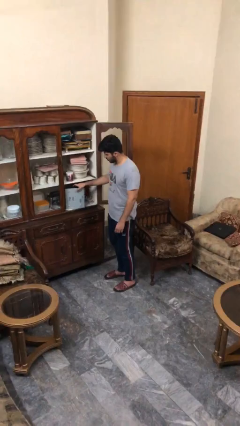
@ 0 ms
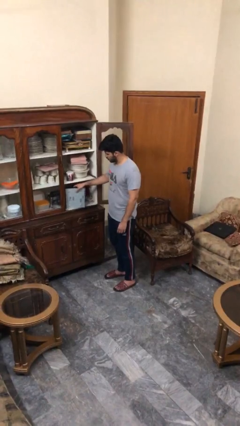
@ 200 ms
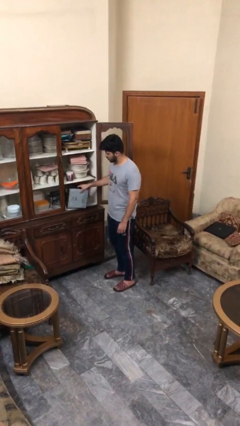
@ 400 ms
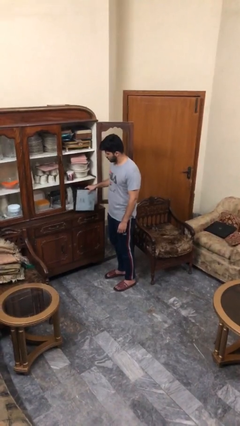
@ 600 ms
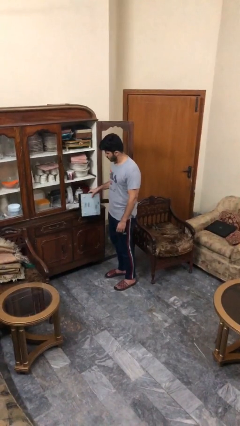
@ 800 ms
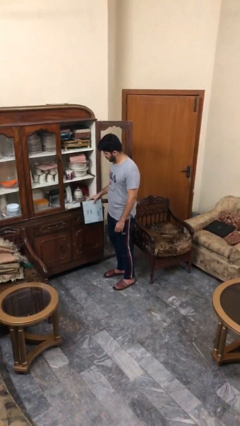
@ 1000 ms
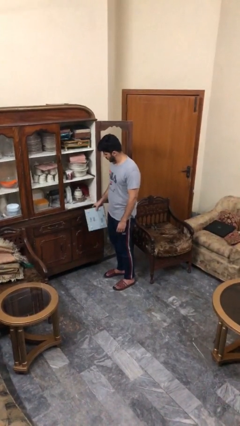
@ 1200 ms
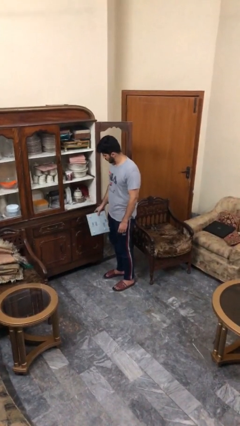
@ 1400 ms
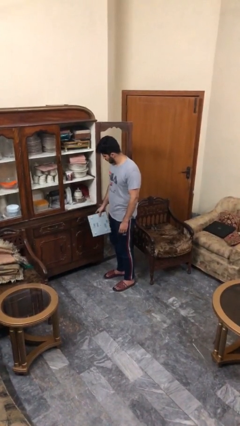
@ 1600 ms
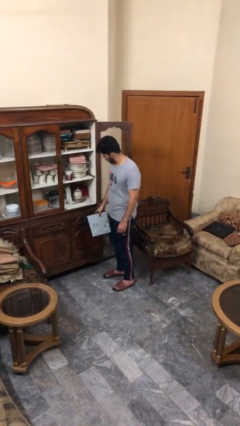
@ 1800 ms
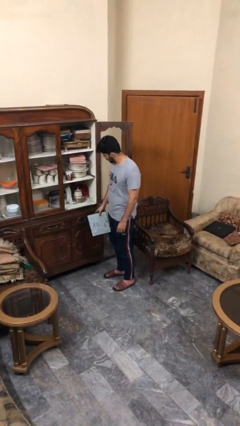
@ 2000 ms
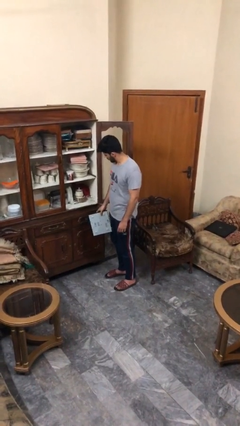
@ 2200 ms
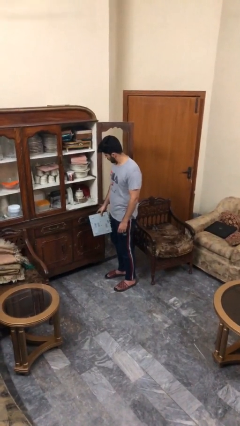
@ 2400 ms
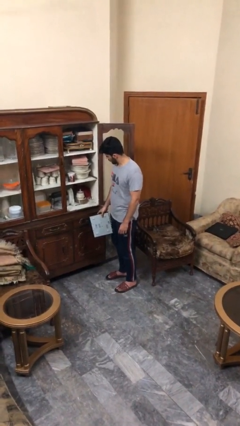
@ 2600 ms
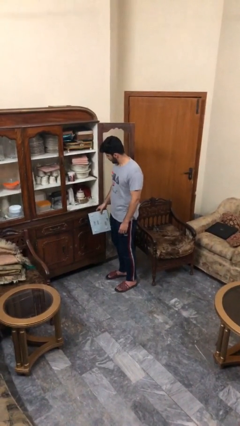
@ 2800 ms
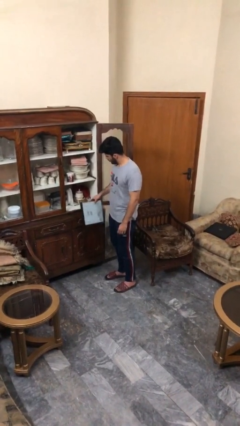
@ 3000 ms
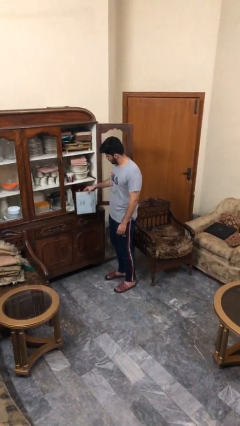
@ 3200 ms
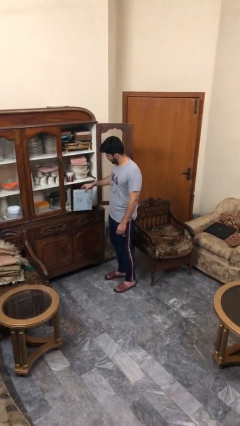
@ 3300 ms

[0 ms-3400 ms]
person picks up object from cabinet

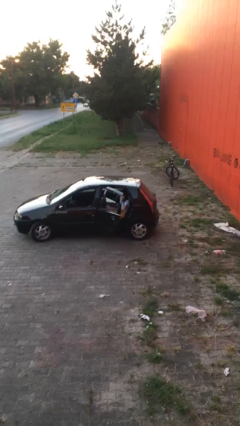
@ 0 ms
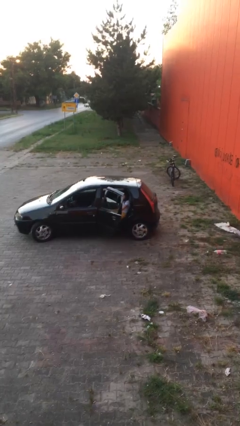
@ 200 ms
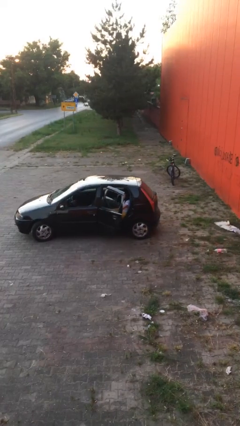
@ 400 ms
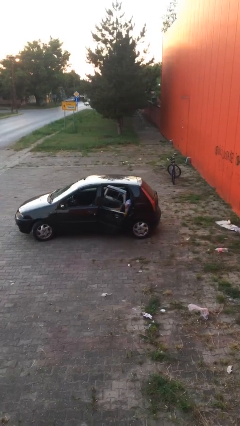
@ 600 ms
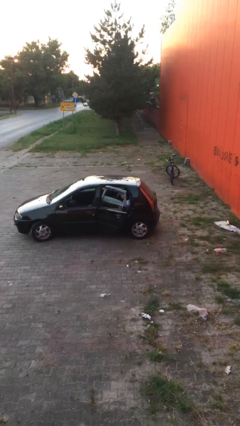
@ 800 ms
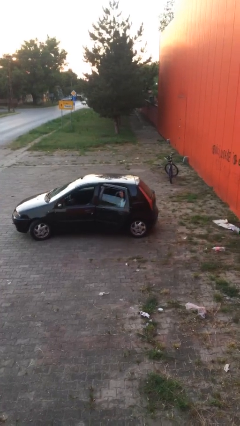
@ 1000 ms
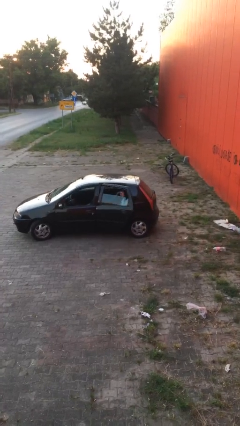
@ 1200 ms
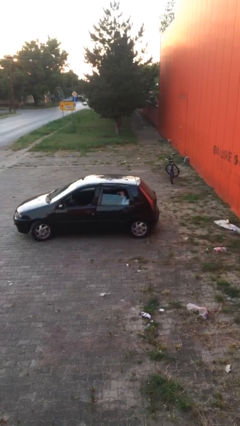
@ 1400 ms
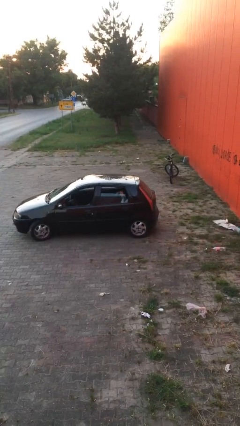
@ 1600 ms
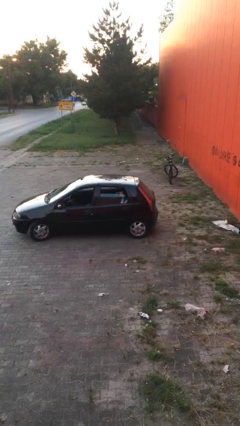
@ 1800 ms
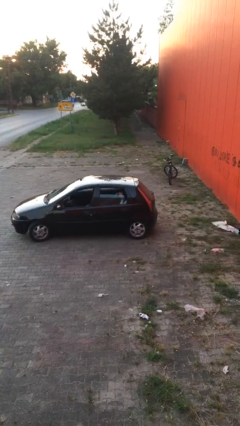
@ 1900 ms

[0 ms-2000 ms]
person closes car door

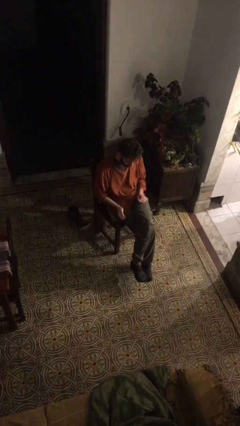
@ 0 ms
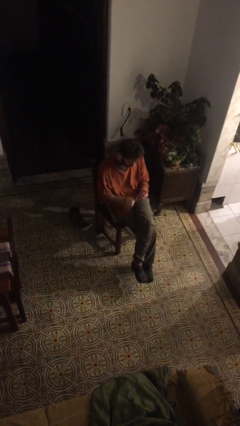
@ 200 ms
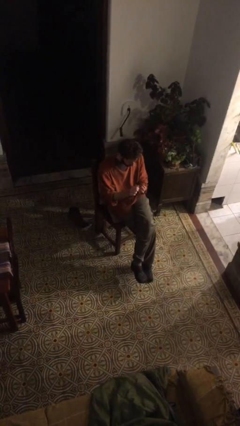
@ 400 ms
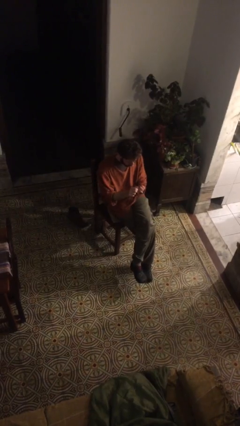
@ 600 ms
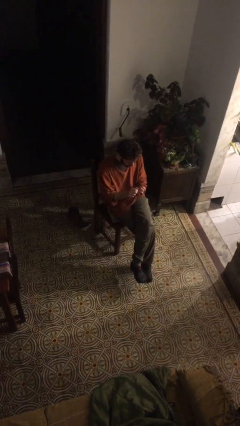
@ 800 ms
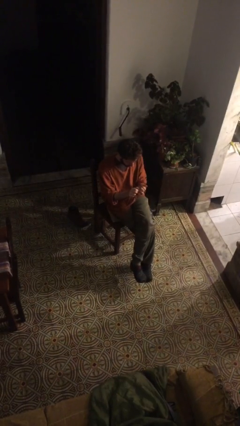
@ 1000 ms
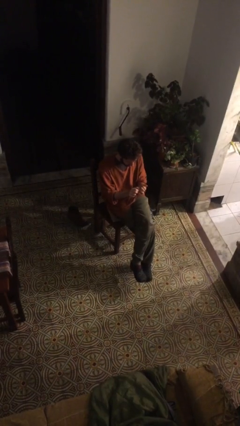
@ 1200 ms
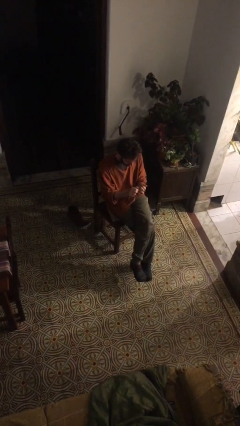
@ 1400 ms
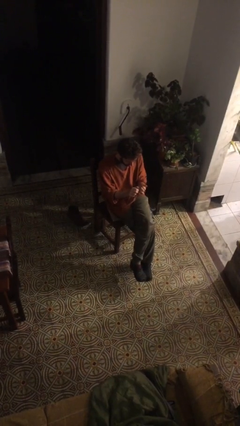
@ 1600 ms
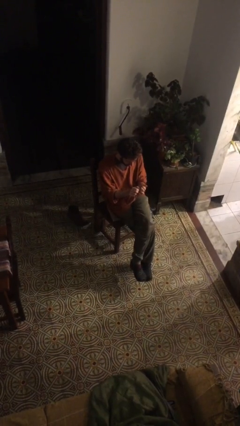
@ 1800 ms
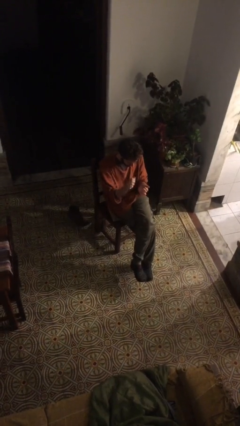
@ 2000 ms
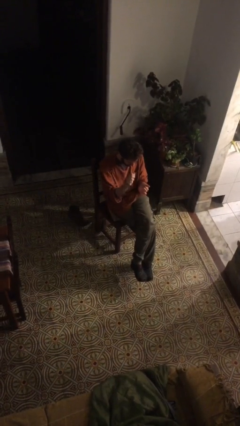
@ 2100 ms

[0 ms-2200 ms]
person files fingernails

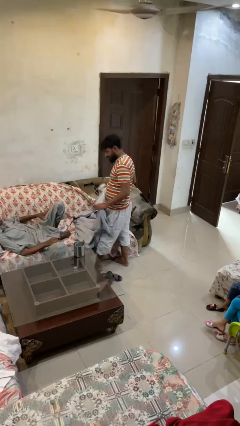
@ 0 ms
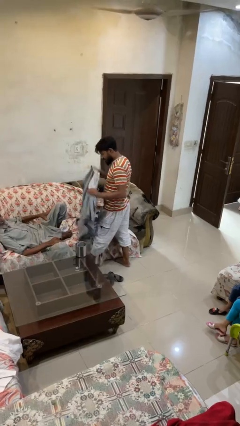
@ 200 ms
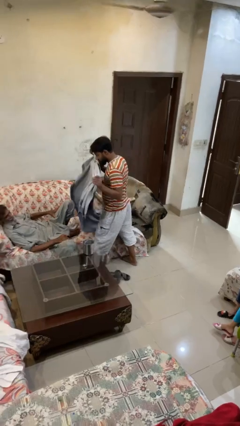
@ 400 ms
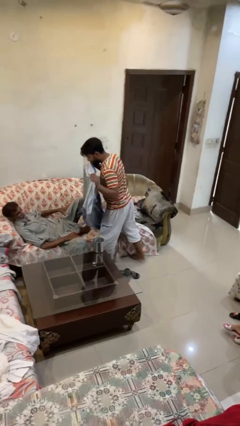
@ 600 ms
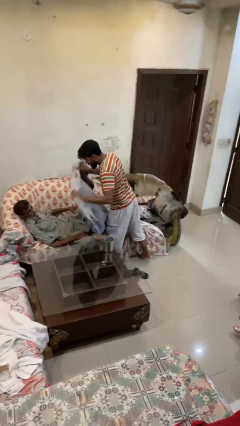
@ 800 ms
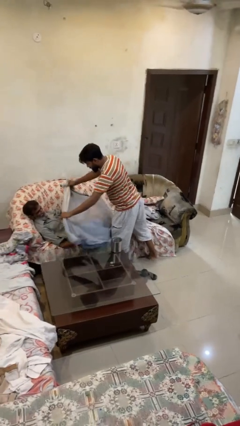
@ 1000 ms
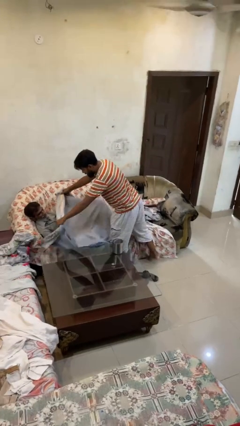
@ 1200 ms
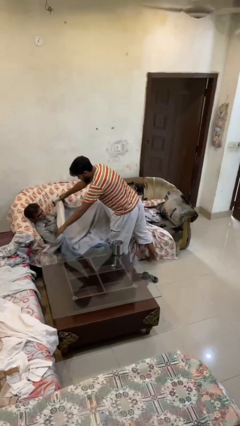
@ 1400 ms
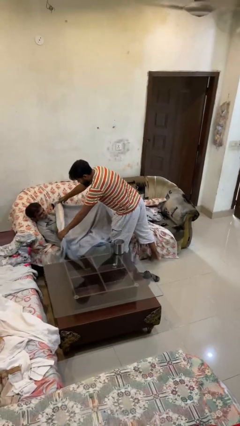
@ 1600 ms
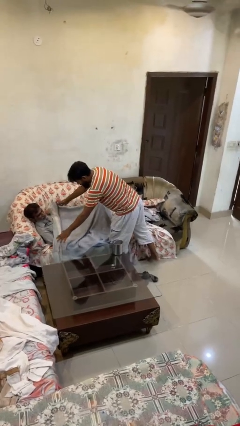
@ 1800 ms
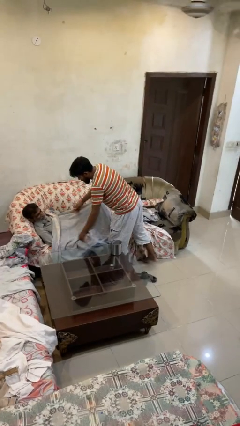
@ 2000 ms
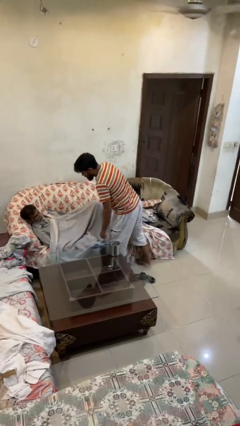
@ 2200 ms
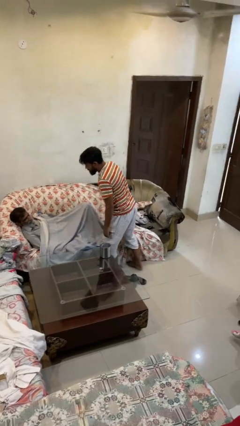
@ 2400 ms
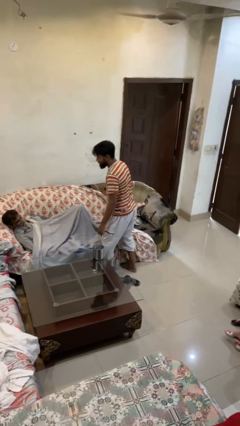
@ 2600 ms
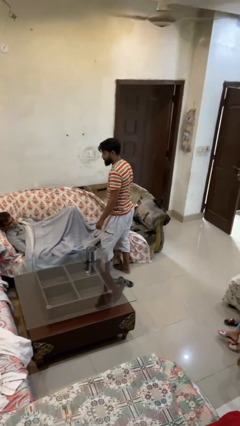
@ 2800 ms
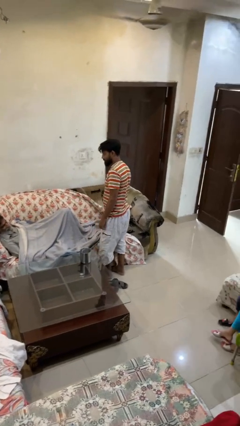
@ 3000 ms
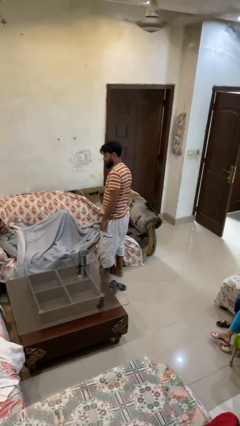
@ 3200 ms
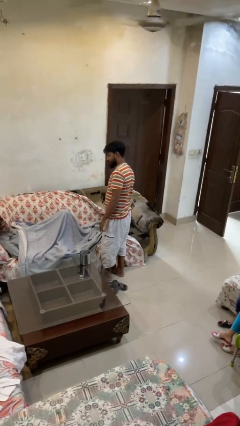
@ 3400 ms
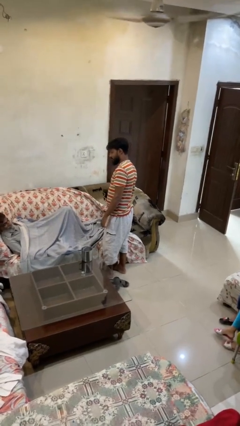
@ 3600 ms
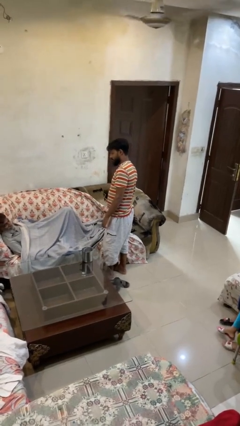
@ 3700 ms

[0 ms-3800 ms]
person covers friend with blanket

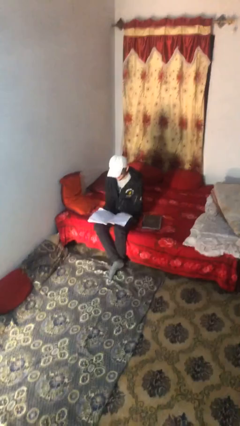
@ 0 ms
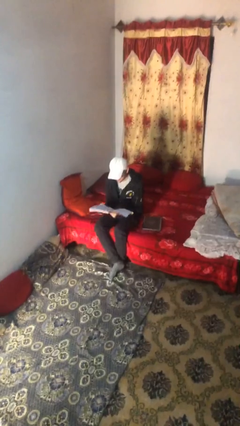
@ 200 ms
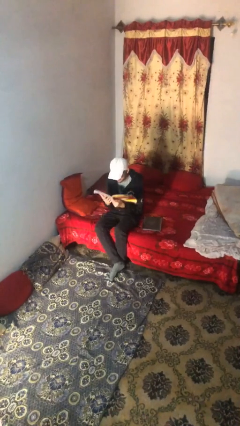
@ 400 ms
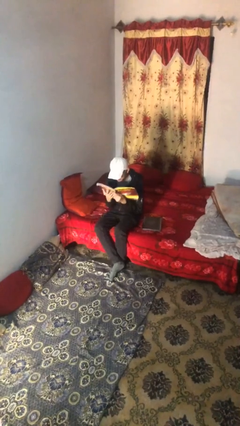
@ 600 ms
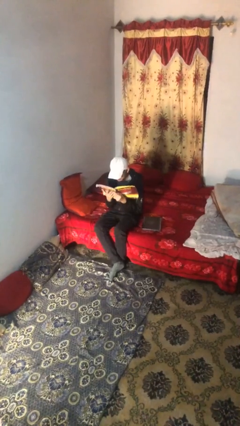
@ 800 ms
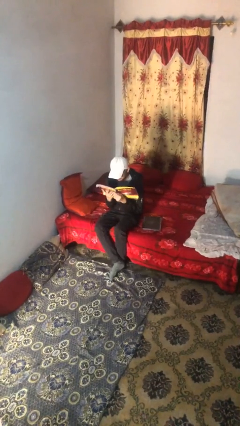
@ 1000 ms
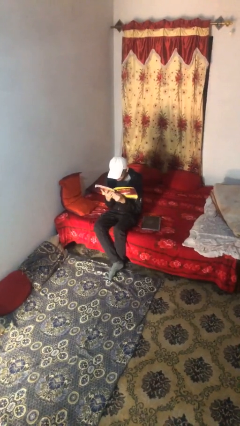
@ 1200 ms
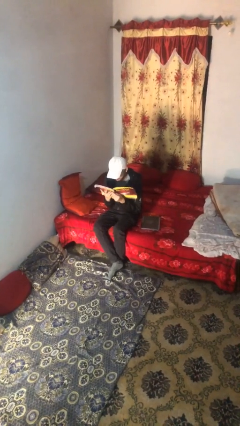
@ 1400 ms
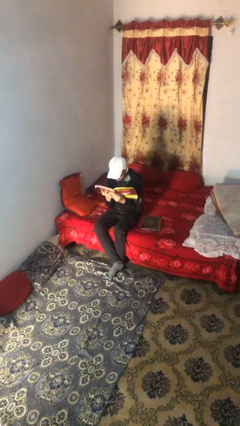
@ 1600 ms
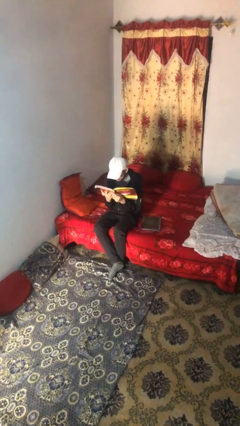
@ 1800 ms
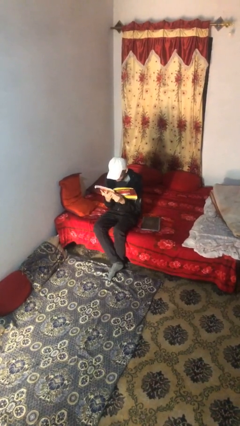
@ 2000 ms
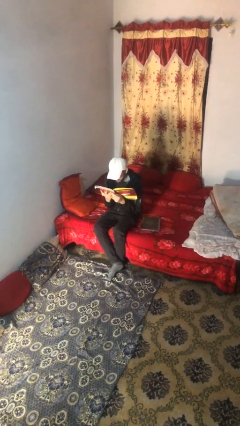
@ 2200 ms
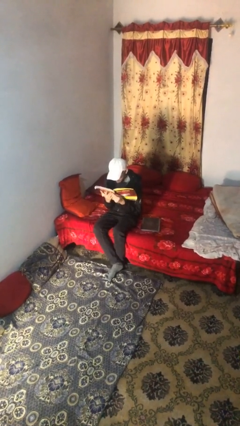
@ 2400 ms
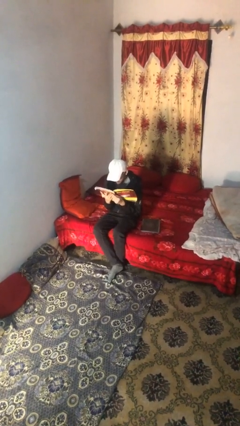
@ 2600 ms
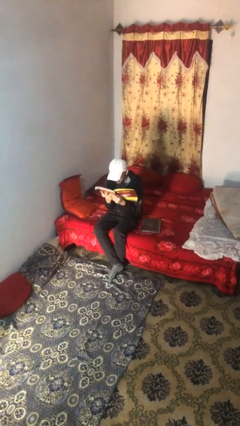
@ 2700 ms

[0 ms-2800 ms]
person reads document

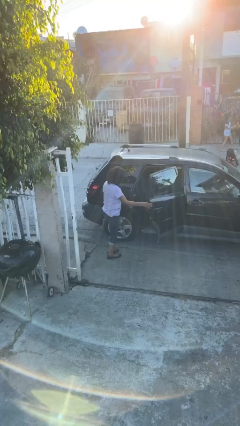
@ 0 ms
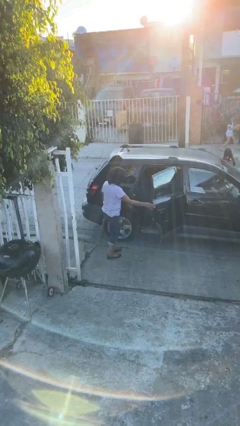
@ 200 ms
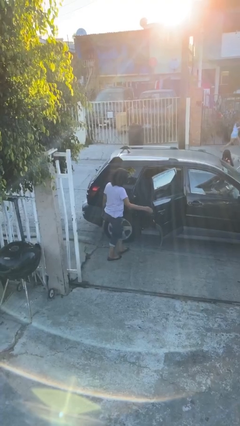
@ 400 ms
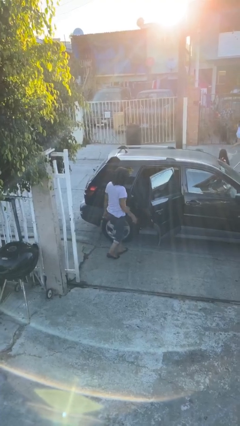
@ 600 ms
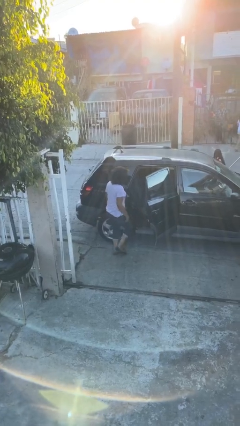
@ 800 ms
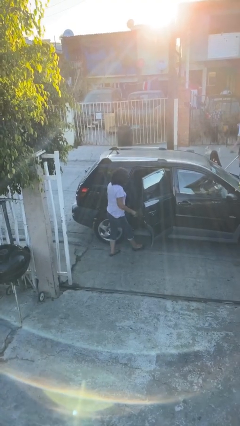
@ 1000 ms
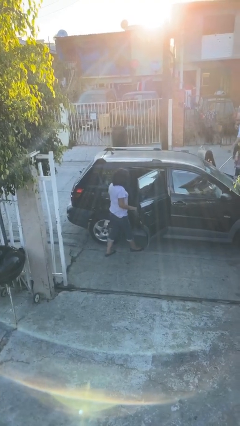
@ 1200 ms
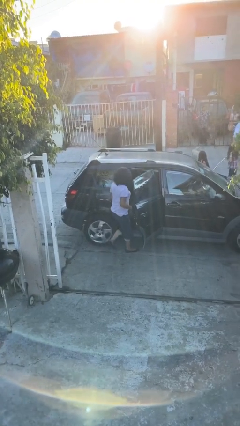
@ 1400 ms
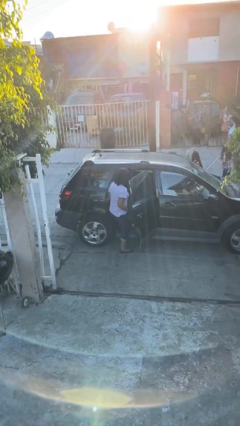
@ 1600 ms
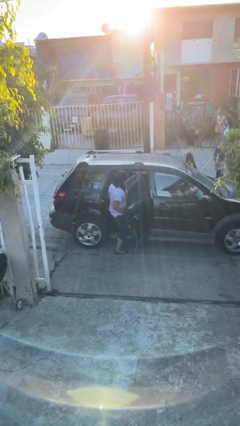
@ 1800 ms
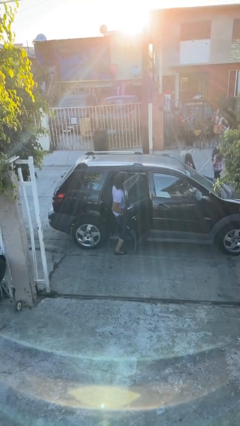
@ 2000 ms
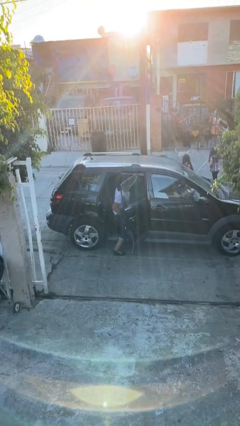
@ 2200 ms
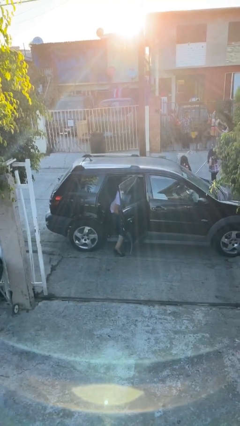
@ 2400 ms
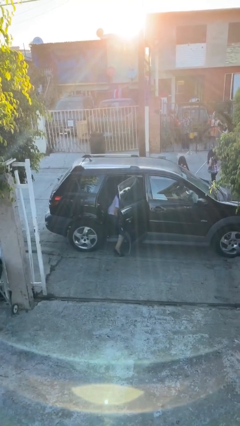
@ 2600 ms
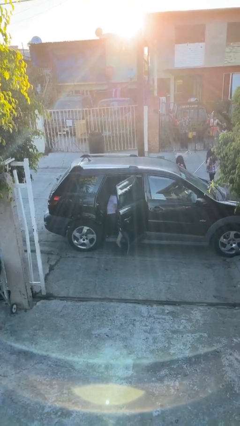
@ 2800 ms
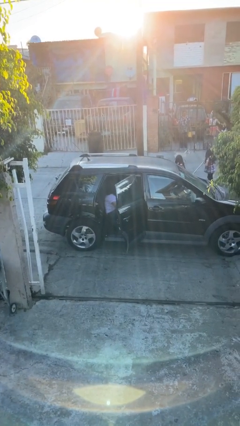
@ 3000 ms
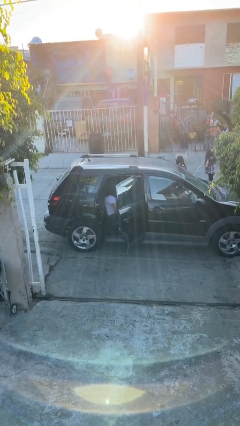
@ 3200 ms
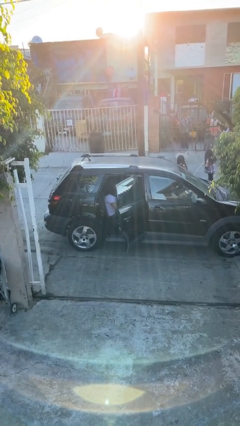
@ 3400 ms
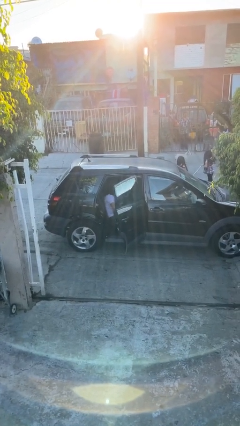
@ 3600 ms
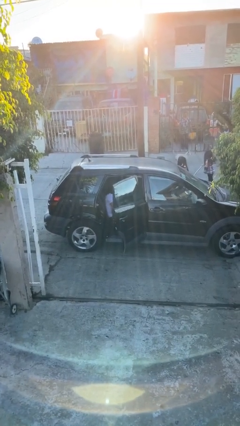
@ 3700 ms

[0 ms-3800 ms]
person enters car
